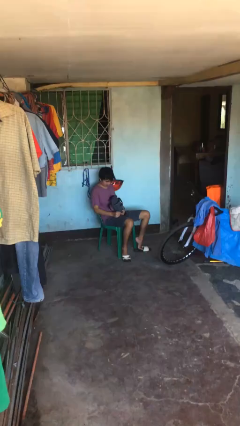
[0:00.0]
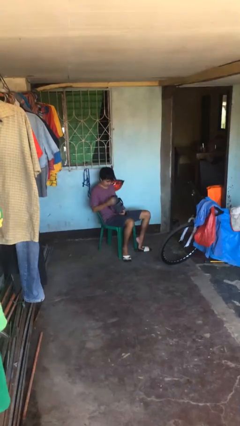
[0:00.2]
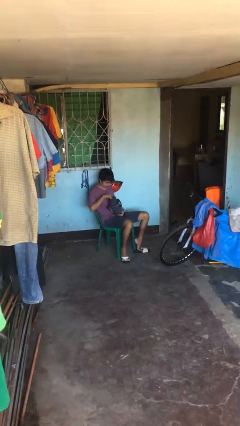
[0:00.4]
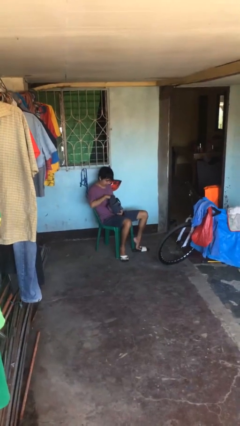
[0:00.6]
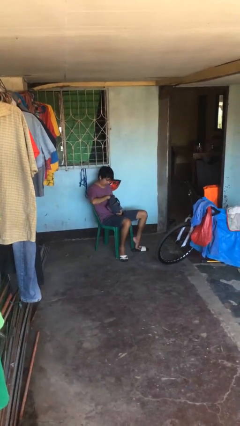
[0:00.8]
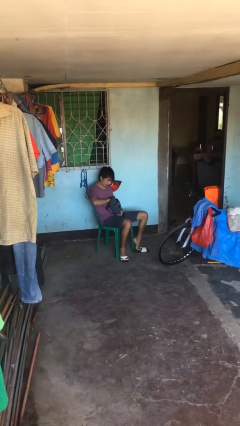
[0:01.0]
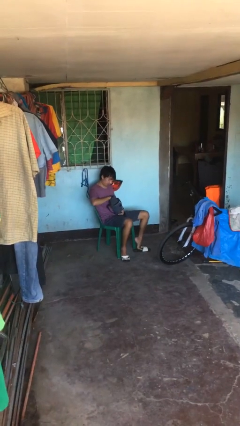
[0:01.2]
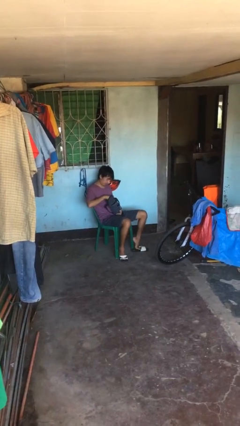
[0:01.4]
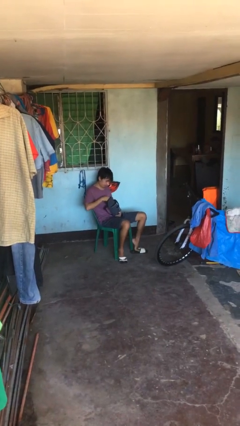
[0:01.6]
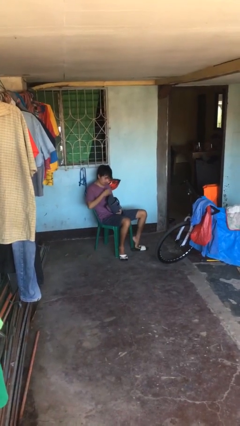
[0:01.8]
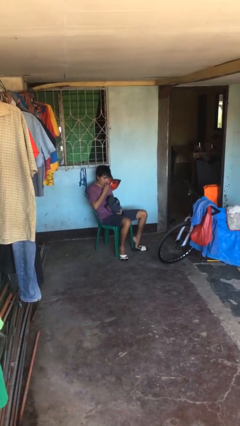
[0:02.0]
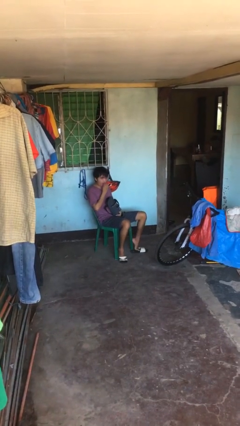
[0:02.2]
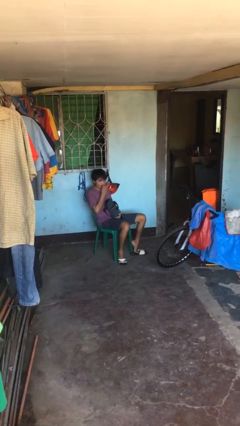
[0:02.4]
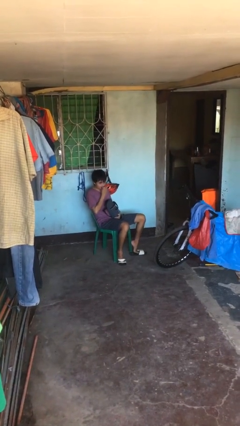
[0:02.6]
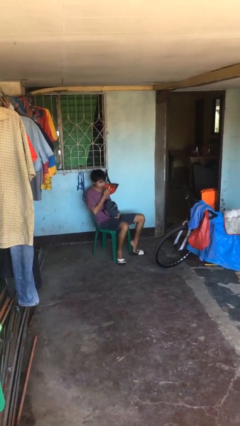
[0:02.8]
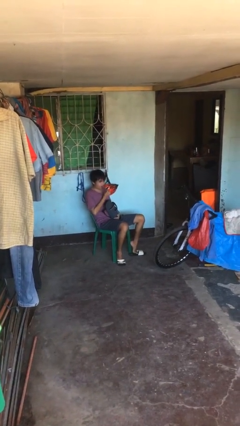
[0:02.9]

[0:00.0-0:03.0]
person eats snack from bag

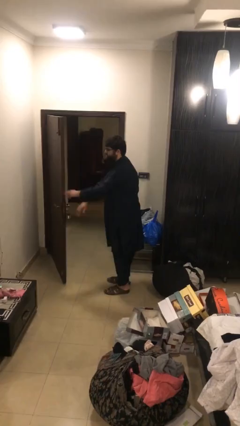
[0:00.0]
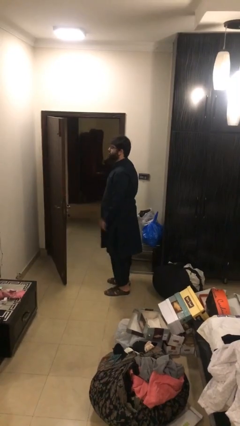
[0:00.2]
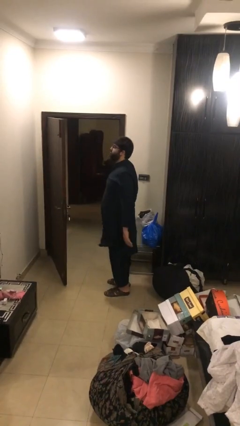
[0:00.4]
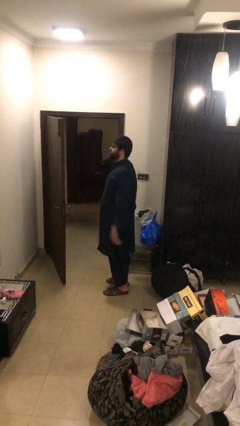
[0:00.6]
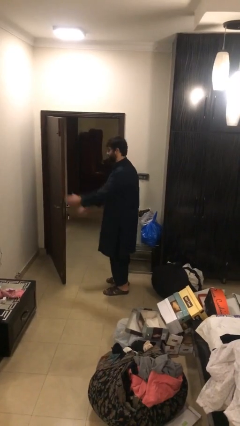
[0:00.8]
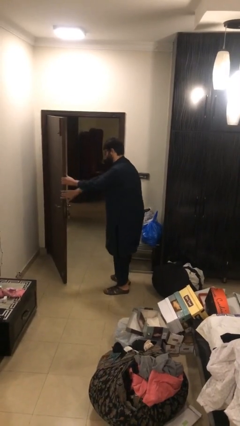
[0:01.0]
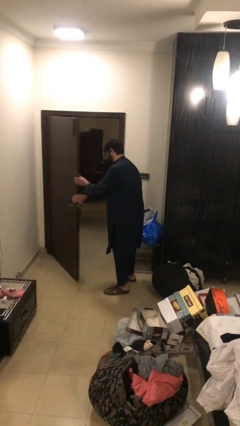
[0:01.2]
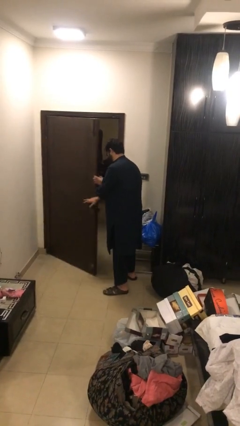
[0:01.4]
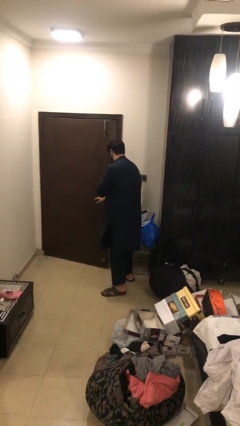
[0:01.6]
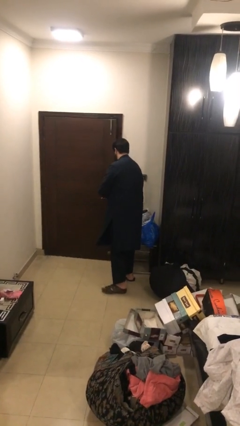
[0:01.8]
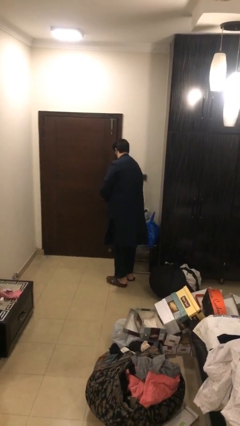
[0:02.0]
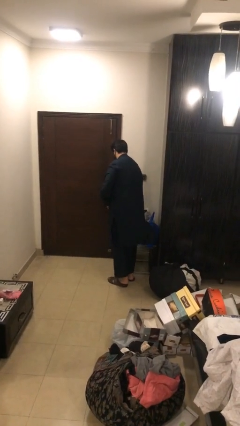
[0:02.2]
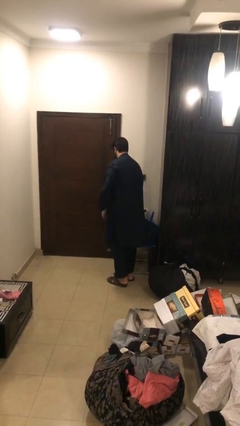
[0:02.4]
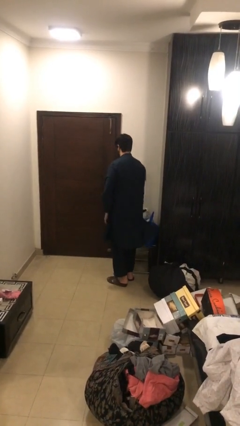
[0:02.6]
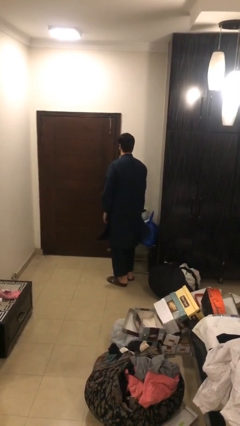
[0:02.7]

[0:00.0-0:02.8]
person closes facility door

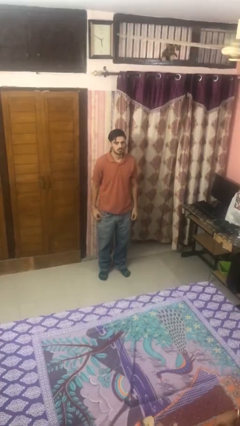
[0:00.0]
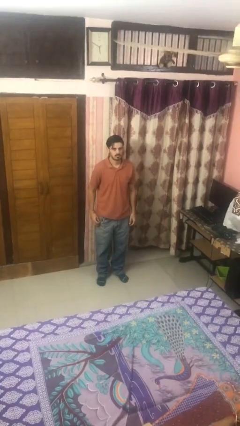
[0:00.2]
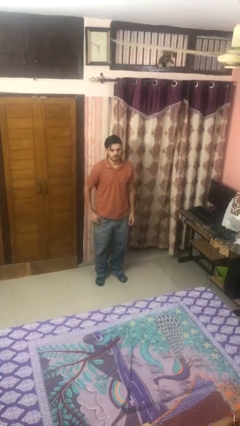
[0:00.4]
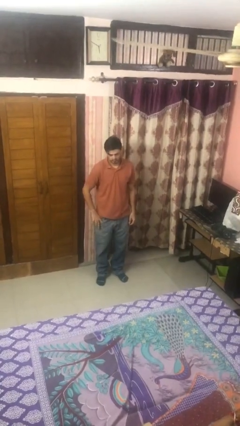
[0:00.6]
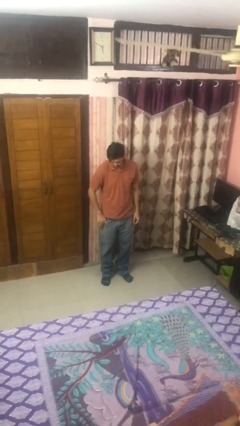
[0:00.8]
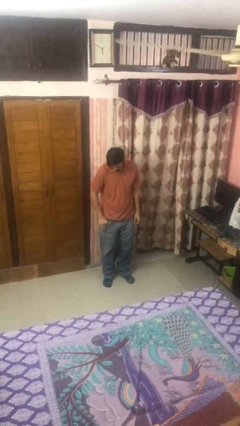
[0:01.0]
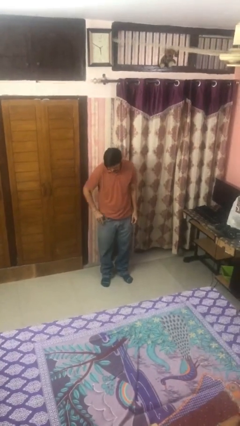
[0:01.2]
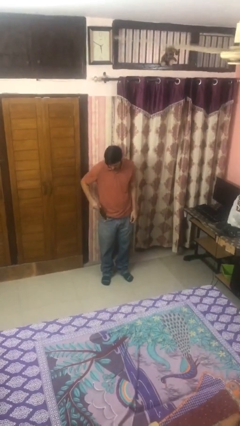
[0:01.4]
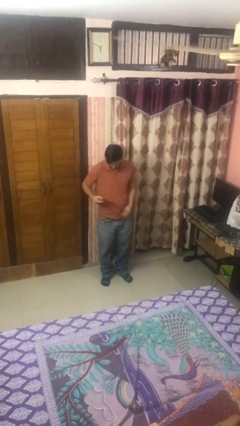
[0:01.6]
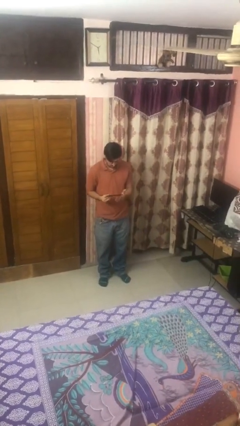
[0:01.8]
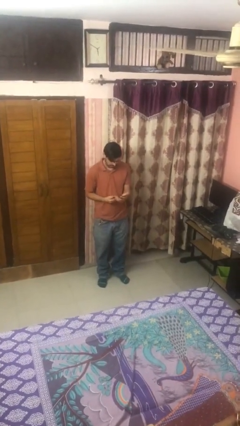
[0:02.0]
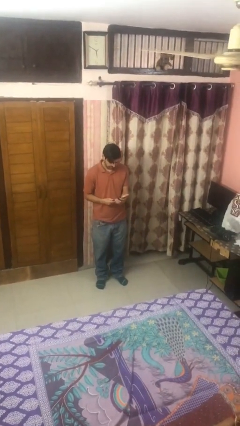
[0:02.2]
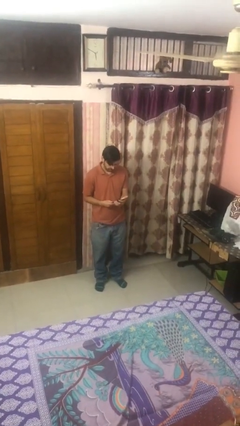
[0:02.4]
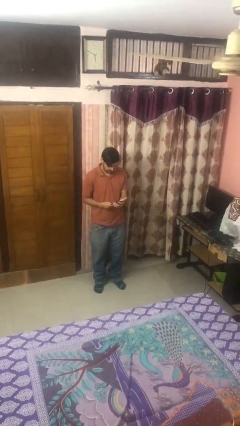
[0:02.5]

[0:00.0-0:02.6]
person takes phone from pocket

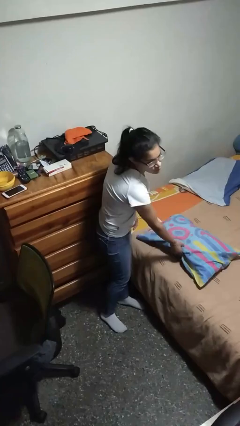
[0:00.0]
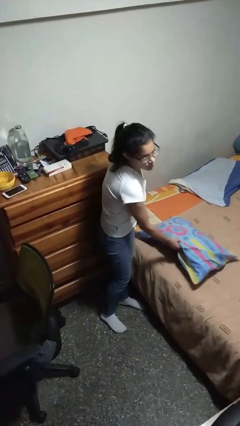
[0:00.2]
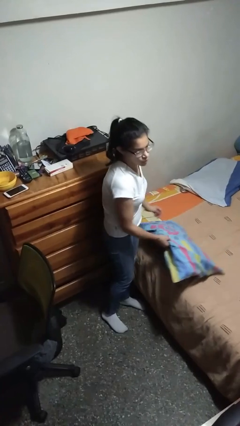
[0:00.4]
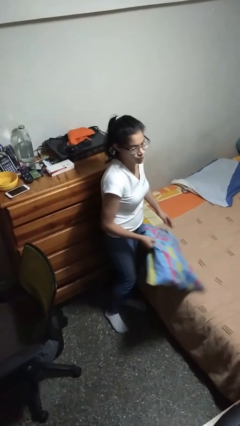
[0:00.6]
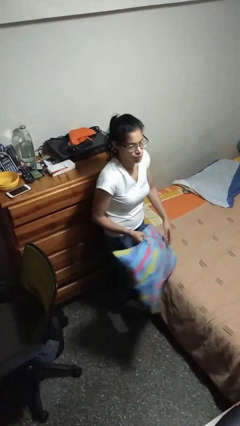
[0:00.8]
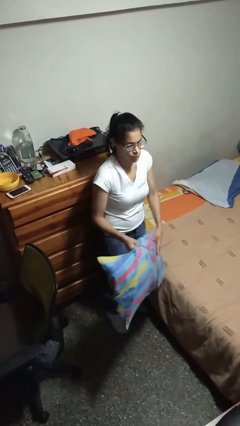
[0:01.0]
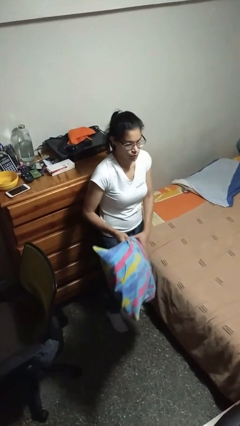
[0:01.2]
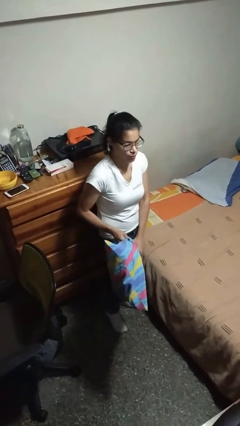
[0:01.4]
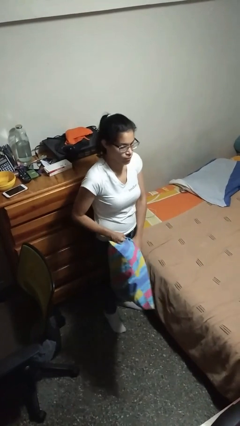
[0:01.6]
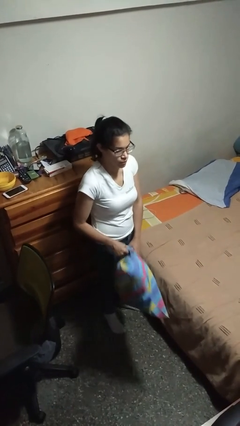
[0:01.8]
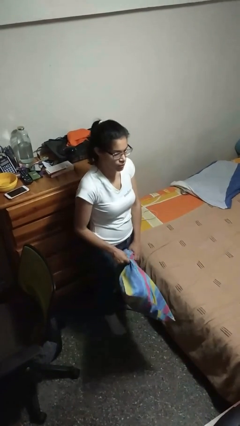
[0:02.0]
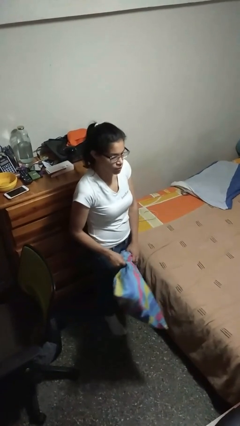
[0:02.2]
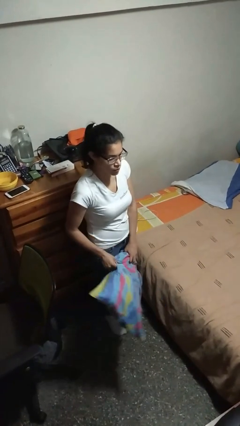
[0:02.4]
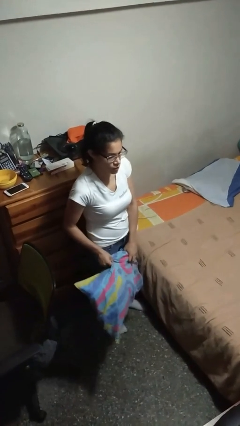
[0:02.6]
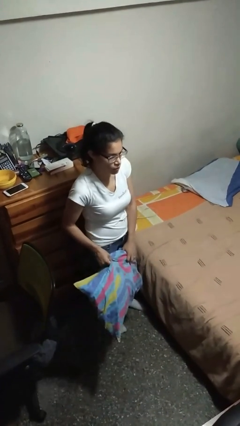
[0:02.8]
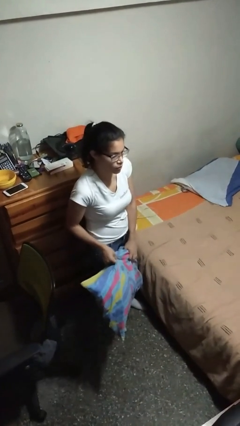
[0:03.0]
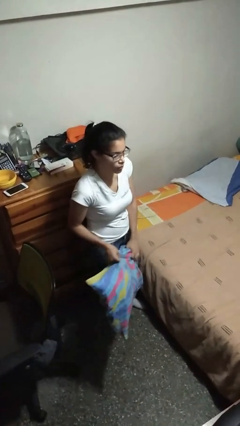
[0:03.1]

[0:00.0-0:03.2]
person picks up object from bed

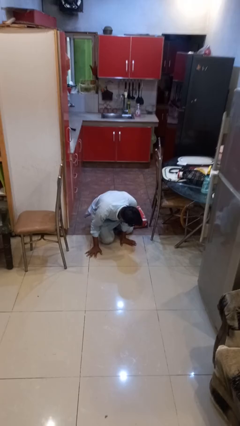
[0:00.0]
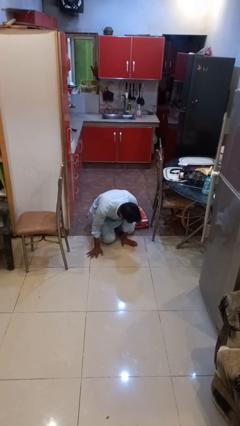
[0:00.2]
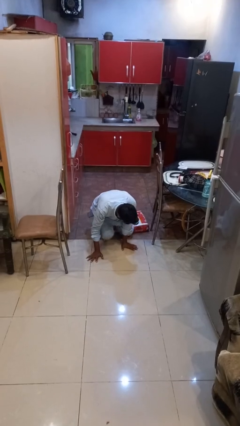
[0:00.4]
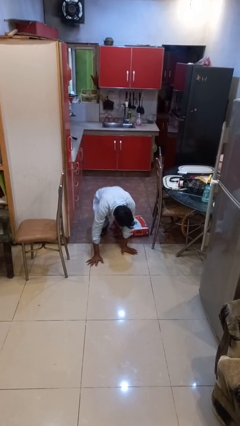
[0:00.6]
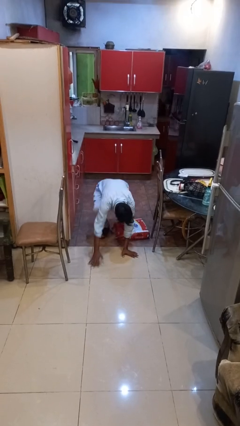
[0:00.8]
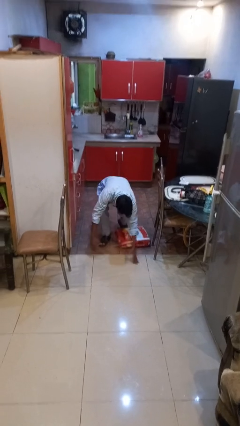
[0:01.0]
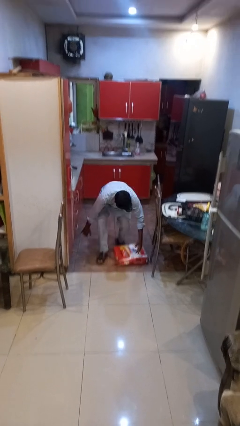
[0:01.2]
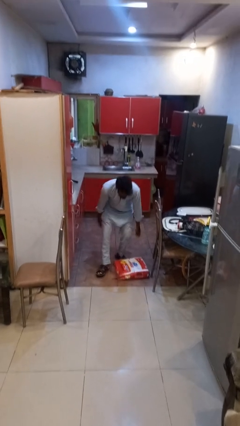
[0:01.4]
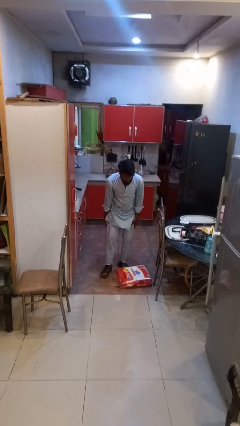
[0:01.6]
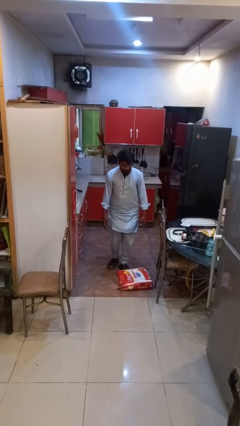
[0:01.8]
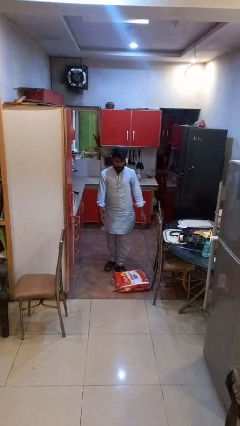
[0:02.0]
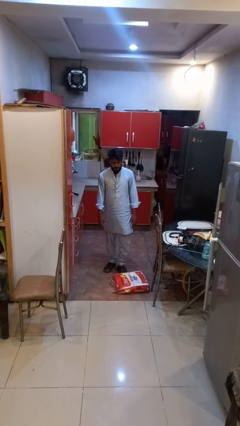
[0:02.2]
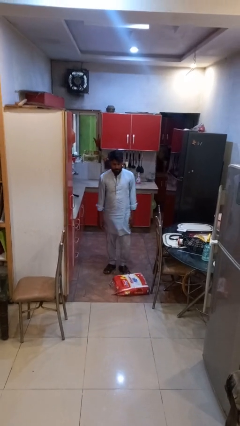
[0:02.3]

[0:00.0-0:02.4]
person stands up from floor

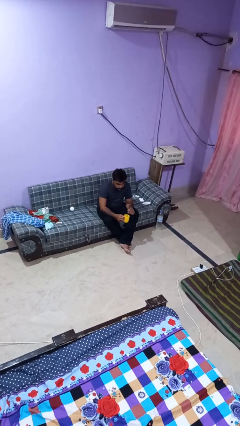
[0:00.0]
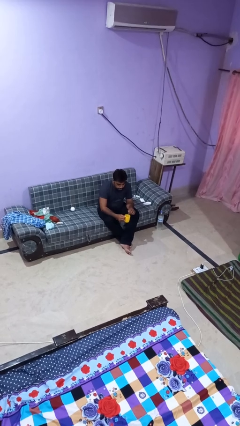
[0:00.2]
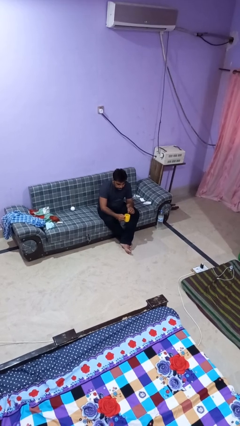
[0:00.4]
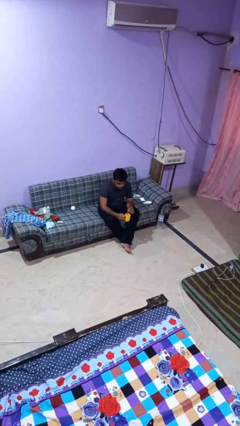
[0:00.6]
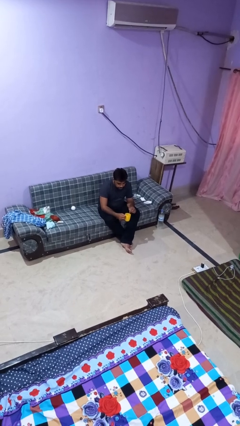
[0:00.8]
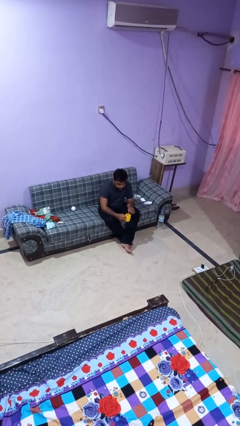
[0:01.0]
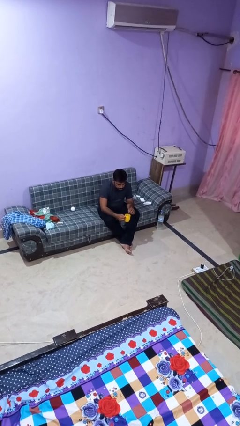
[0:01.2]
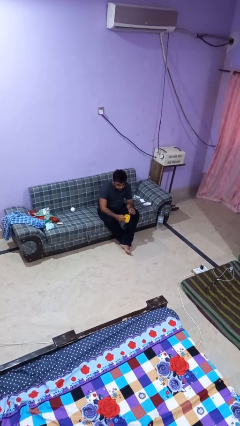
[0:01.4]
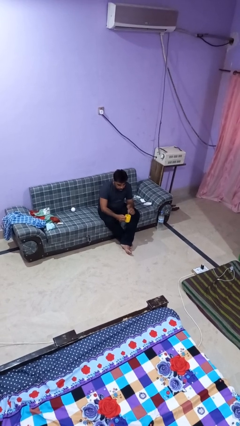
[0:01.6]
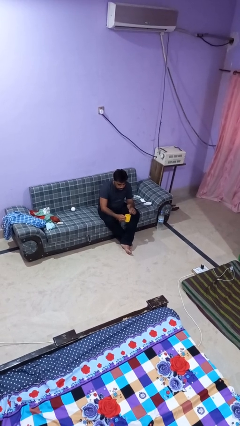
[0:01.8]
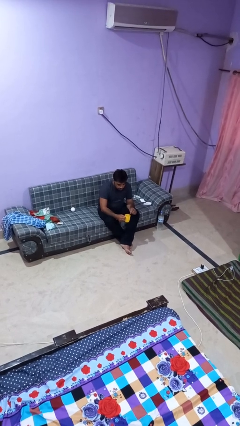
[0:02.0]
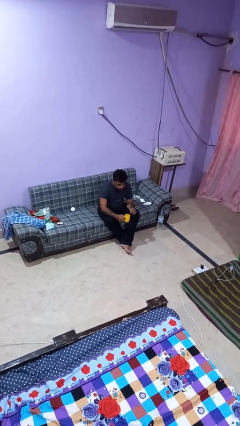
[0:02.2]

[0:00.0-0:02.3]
person stirs mug

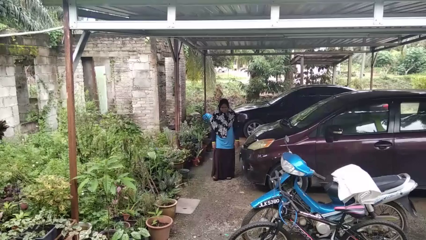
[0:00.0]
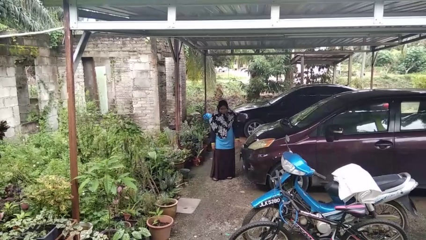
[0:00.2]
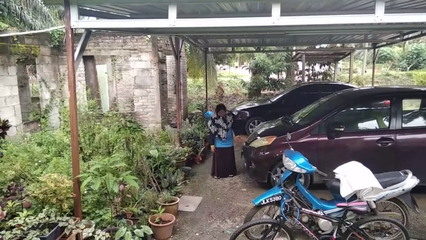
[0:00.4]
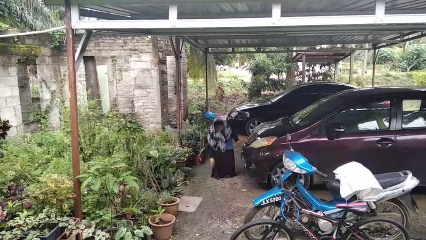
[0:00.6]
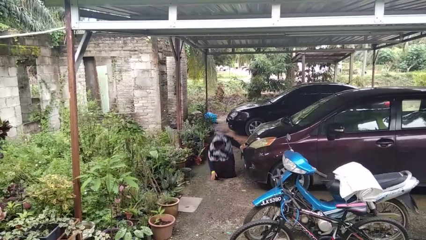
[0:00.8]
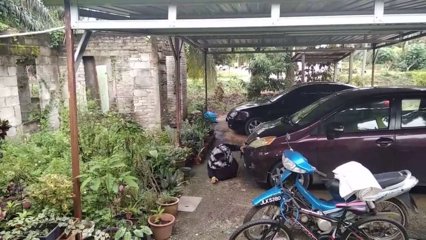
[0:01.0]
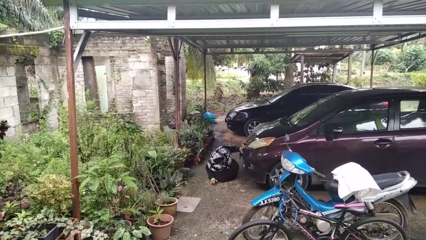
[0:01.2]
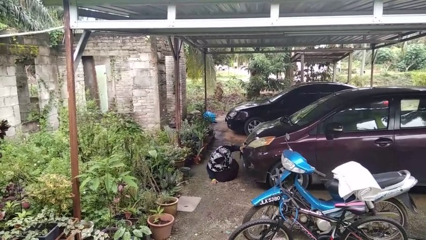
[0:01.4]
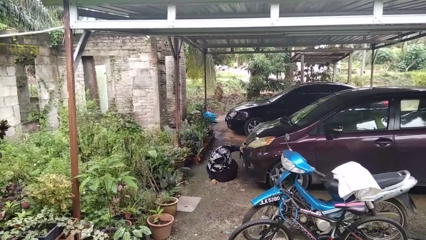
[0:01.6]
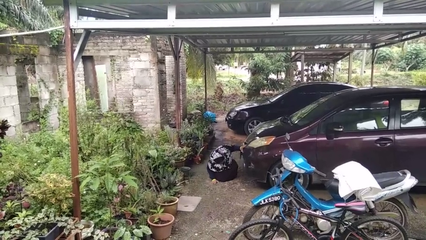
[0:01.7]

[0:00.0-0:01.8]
person crawls out from under vehicle
